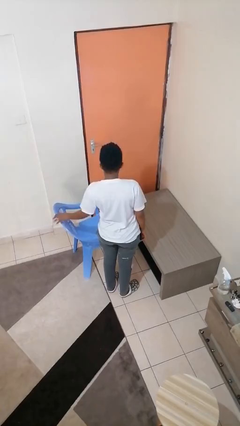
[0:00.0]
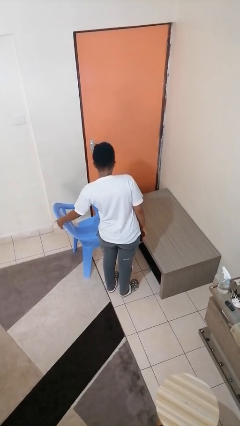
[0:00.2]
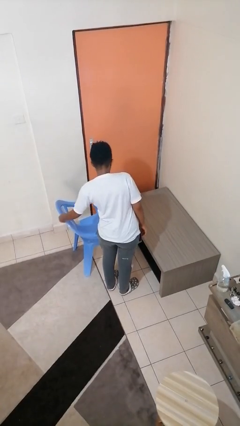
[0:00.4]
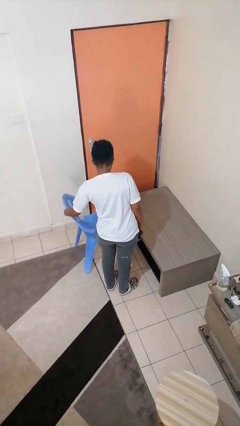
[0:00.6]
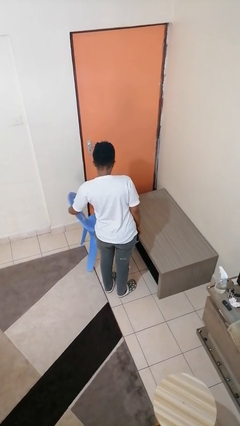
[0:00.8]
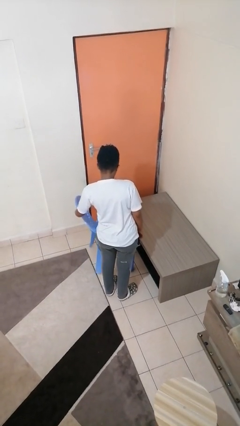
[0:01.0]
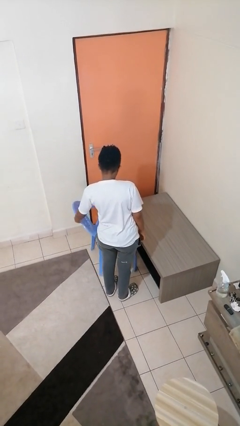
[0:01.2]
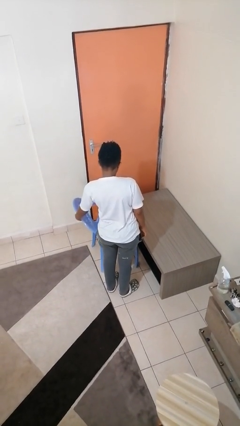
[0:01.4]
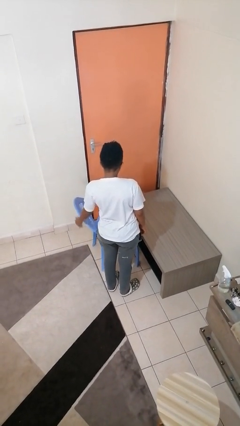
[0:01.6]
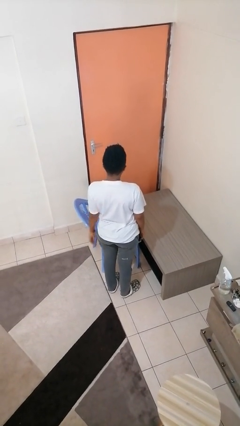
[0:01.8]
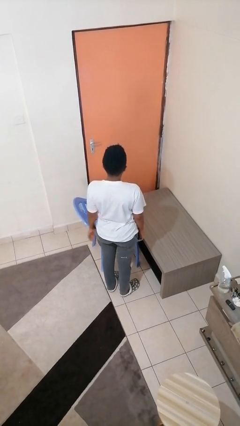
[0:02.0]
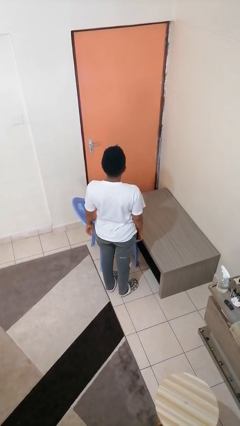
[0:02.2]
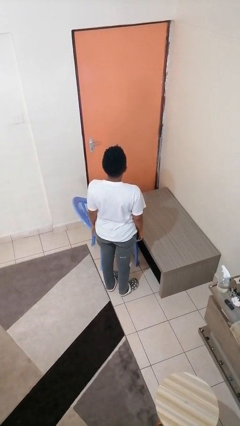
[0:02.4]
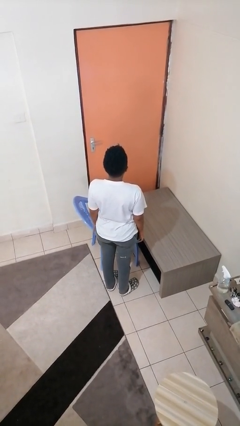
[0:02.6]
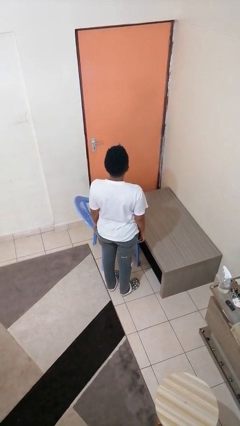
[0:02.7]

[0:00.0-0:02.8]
person pushes in chair

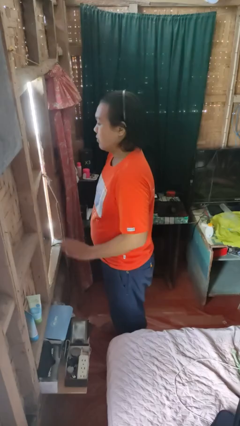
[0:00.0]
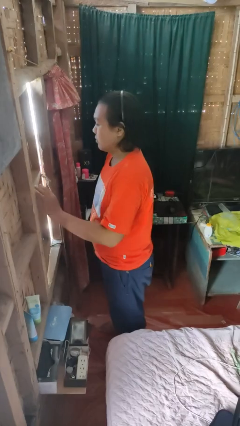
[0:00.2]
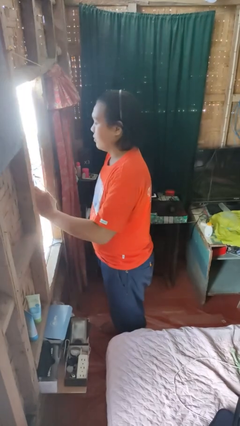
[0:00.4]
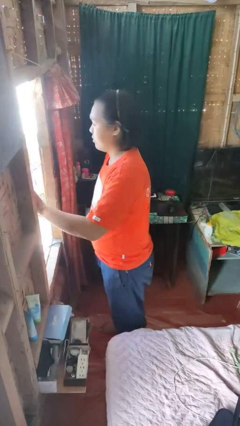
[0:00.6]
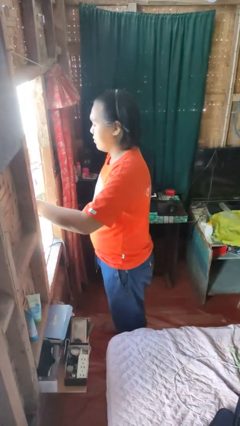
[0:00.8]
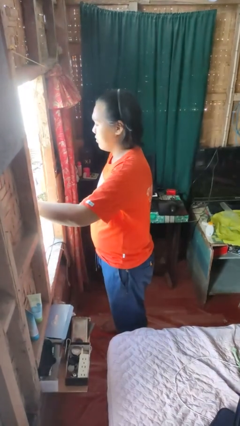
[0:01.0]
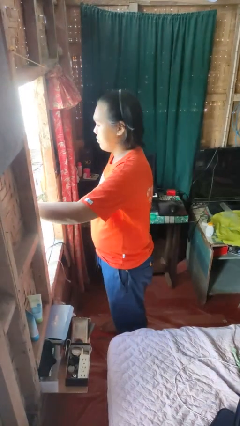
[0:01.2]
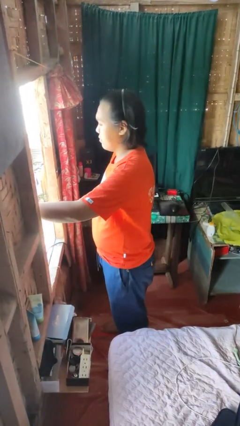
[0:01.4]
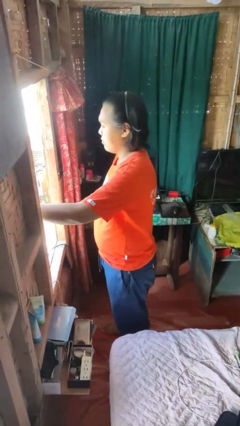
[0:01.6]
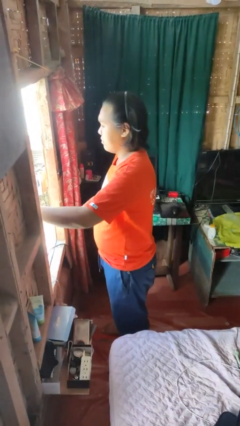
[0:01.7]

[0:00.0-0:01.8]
person opens home window

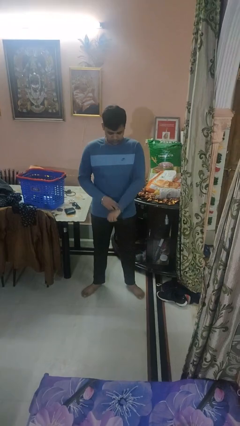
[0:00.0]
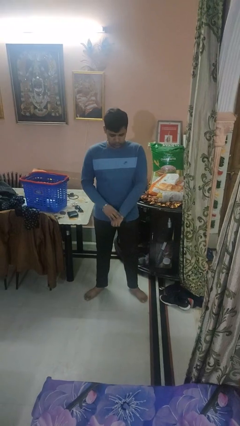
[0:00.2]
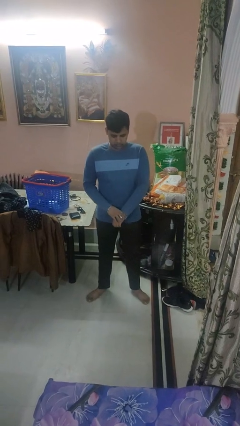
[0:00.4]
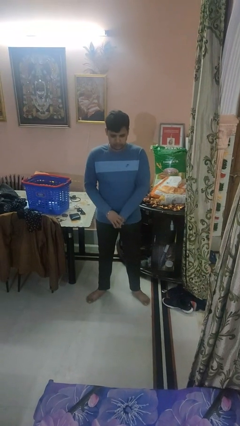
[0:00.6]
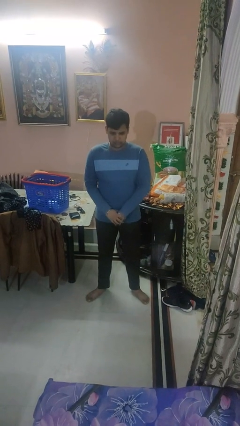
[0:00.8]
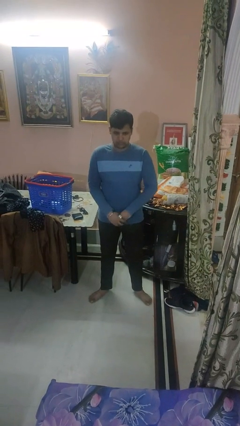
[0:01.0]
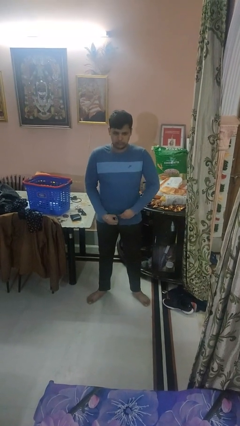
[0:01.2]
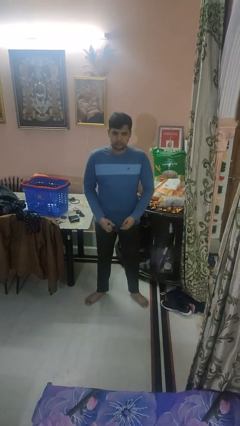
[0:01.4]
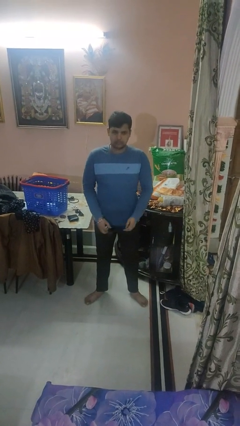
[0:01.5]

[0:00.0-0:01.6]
person takes off wristwatch

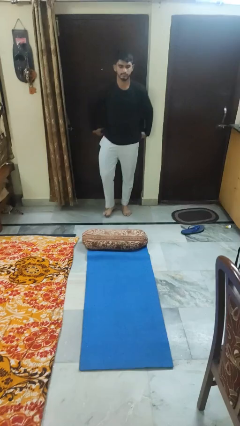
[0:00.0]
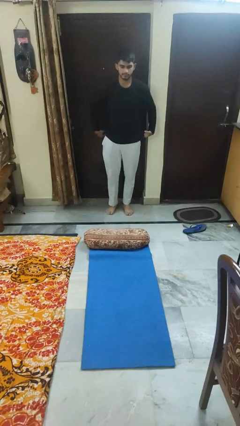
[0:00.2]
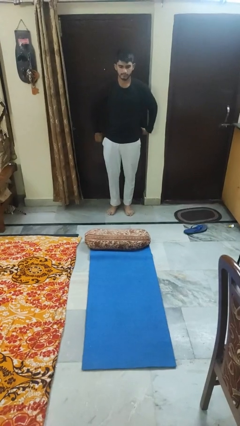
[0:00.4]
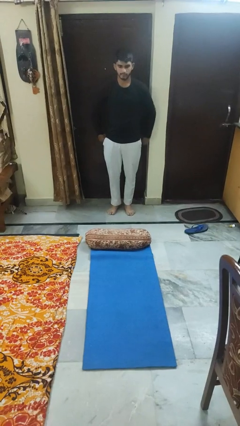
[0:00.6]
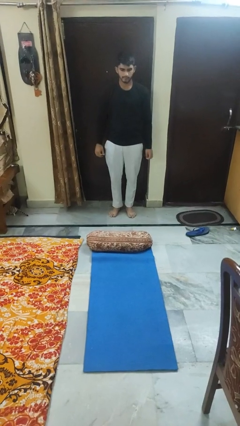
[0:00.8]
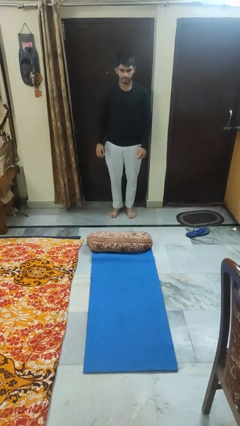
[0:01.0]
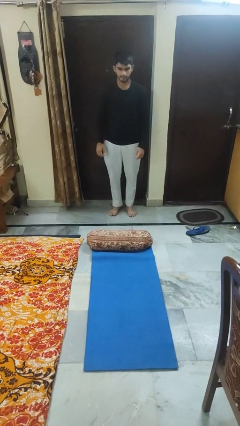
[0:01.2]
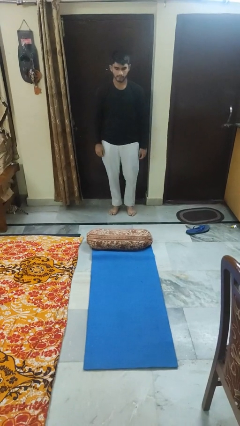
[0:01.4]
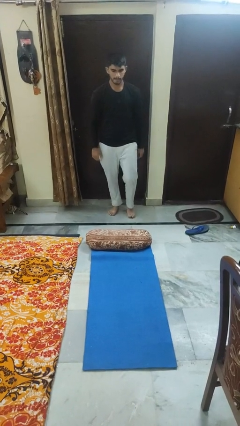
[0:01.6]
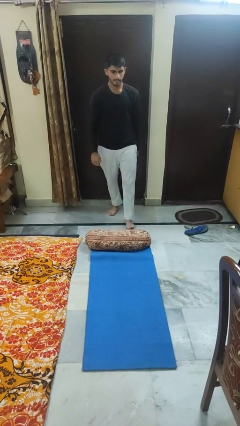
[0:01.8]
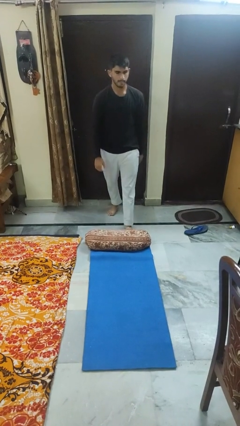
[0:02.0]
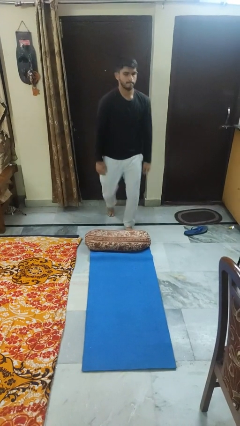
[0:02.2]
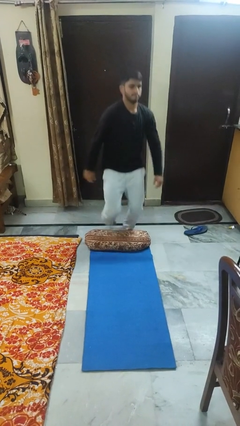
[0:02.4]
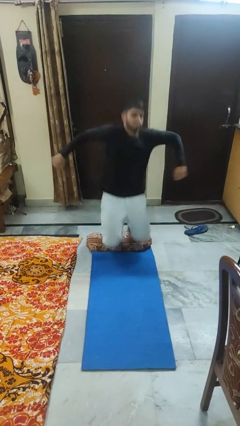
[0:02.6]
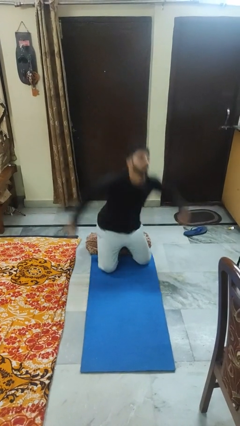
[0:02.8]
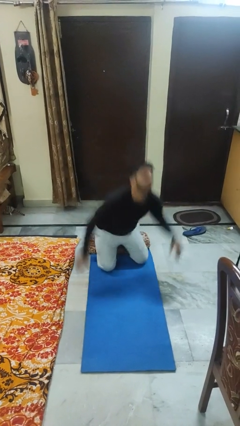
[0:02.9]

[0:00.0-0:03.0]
person trips on object on floor

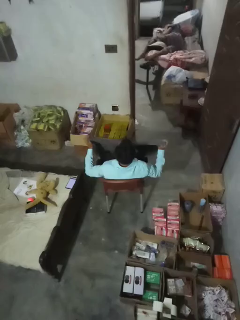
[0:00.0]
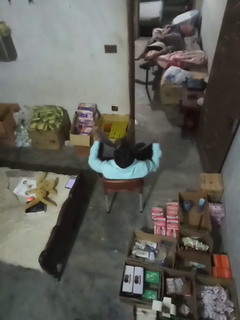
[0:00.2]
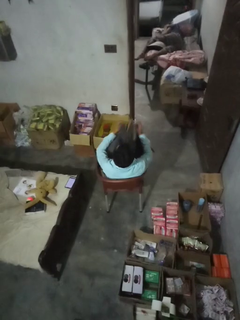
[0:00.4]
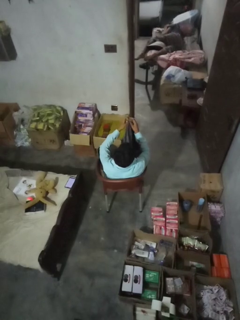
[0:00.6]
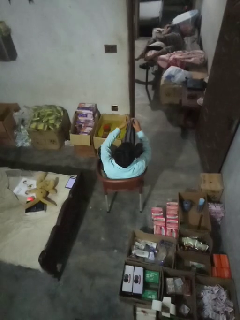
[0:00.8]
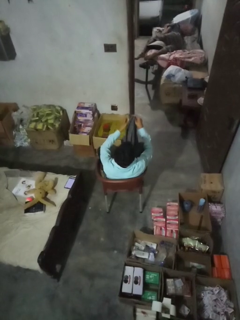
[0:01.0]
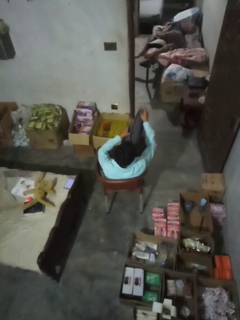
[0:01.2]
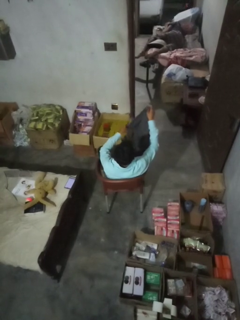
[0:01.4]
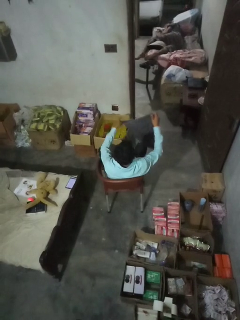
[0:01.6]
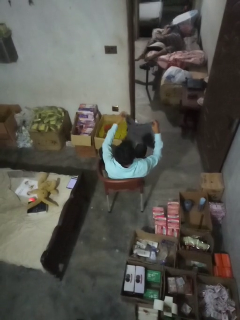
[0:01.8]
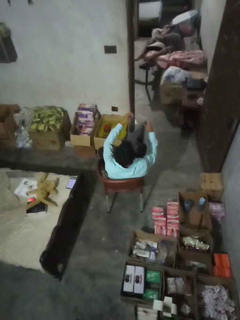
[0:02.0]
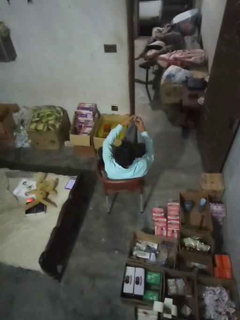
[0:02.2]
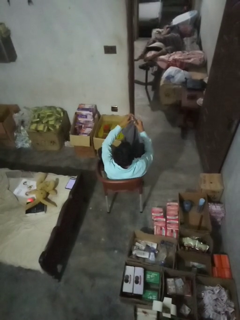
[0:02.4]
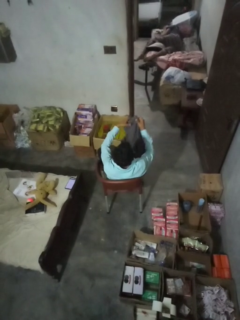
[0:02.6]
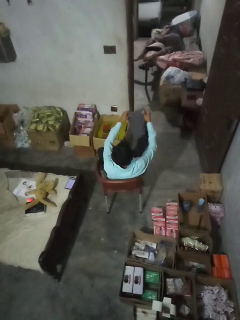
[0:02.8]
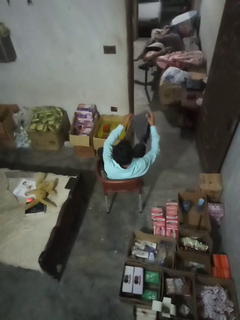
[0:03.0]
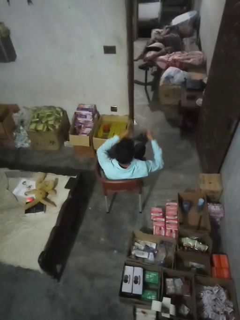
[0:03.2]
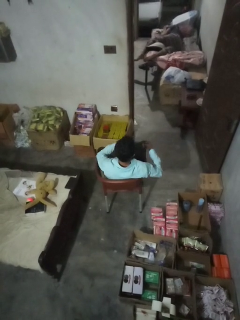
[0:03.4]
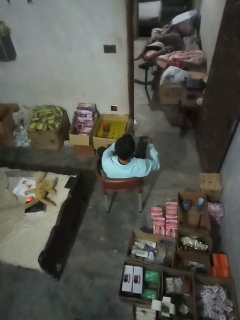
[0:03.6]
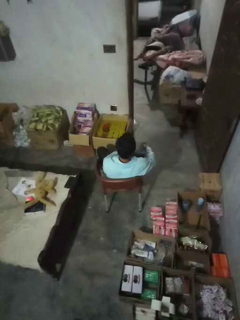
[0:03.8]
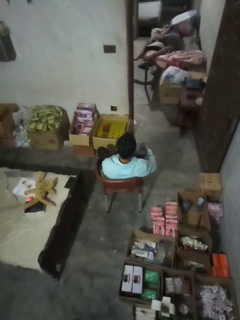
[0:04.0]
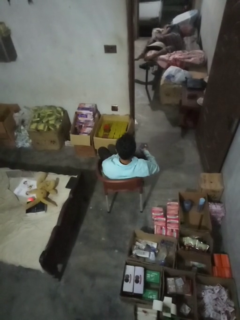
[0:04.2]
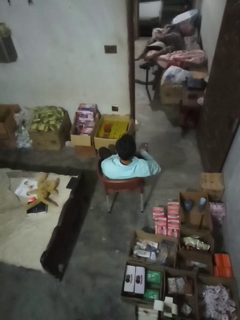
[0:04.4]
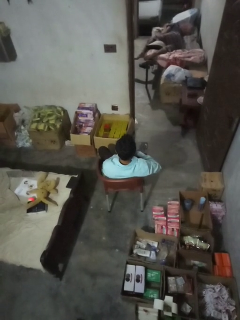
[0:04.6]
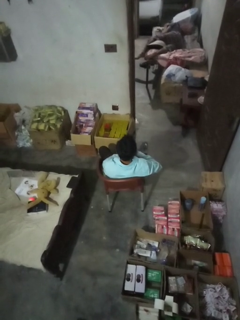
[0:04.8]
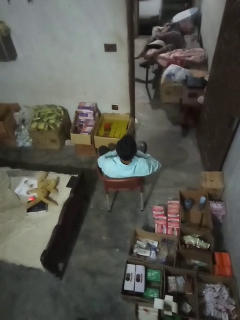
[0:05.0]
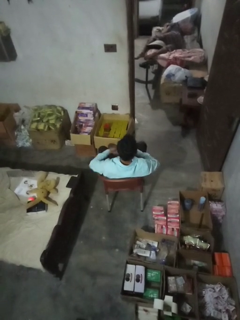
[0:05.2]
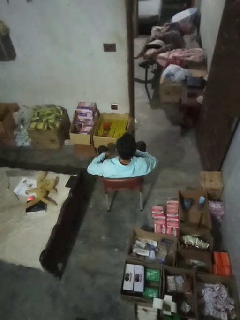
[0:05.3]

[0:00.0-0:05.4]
person folds towel

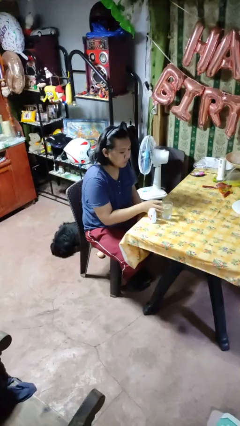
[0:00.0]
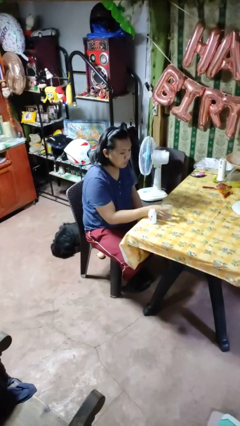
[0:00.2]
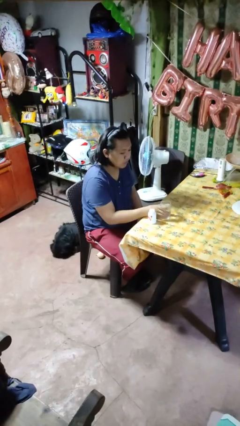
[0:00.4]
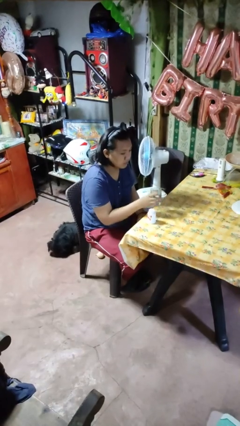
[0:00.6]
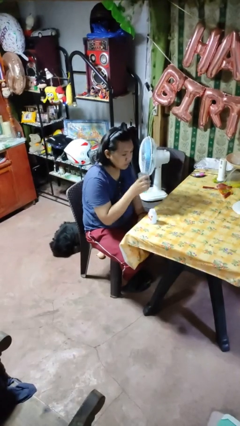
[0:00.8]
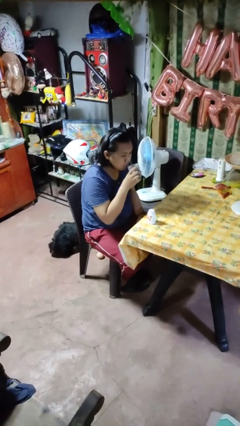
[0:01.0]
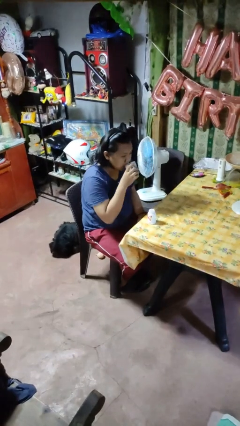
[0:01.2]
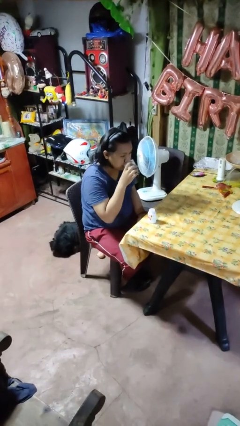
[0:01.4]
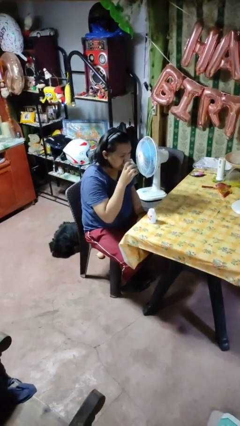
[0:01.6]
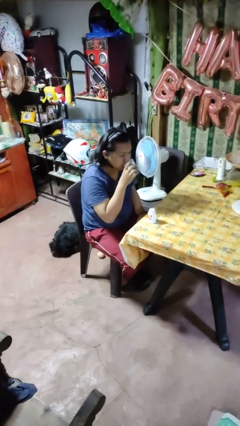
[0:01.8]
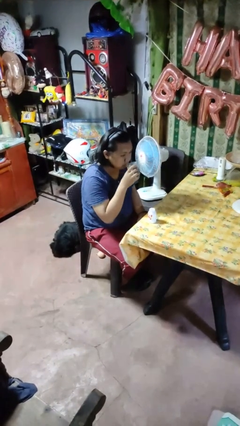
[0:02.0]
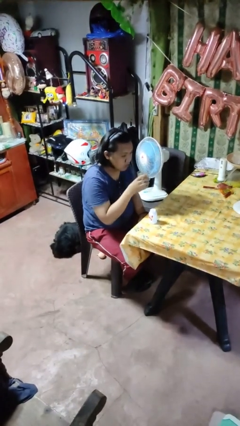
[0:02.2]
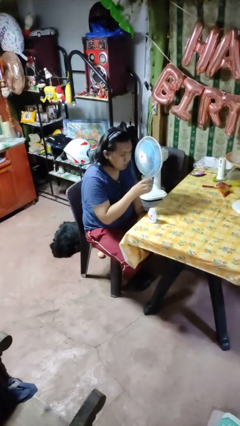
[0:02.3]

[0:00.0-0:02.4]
person drinks from cup

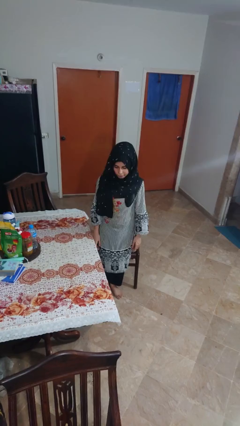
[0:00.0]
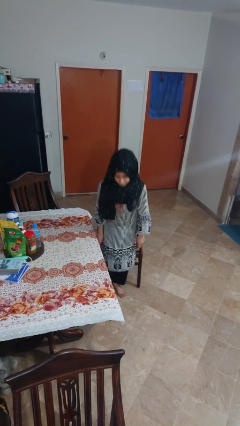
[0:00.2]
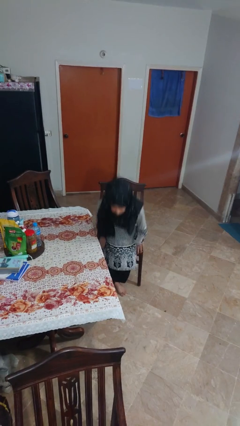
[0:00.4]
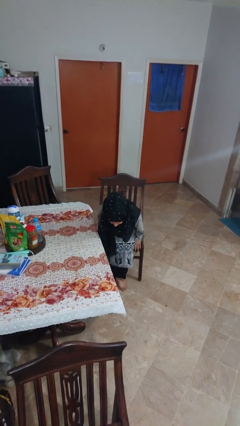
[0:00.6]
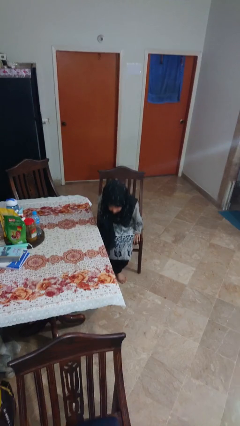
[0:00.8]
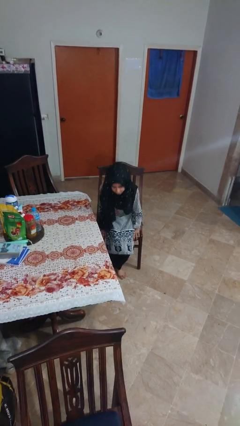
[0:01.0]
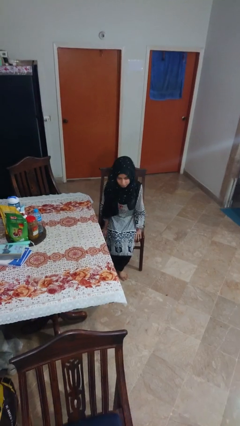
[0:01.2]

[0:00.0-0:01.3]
person sits down
